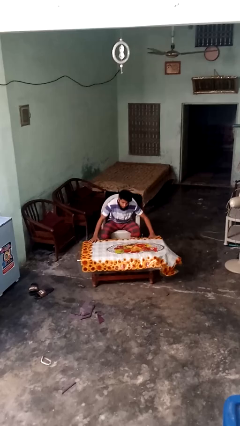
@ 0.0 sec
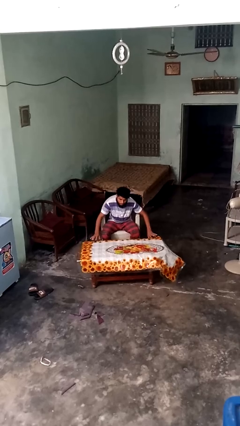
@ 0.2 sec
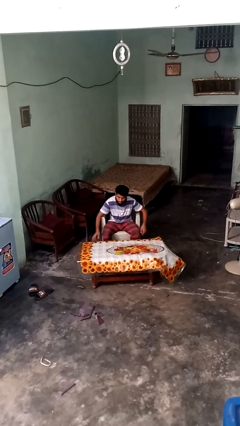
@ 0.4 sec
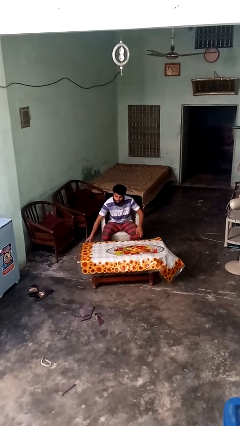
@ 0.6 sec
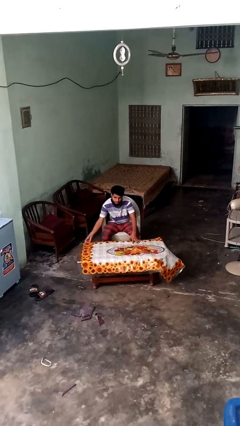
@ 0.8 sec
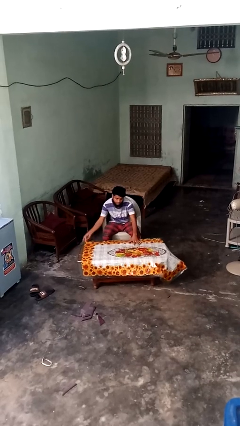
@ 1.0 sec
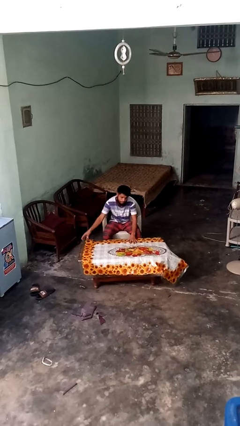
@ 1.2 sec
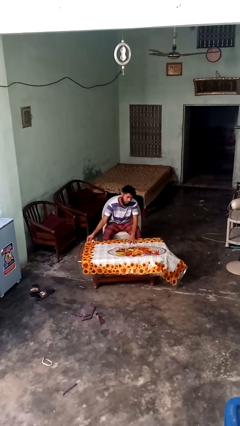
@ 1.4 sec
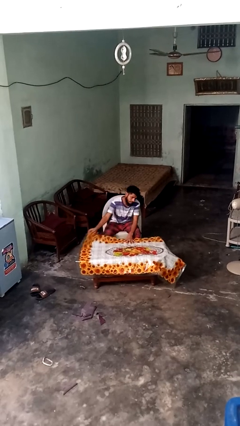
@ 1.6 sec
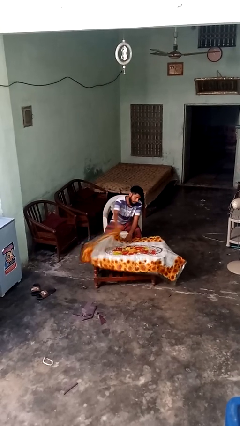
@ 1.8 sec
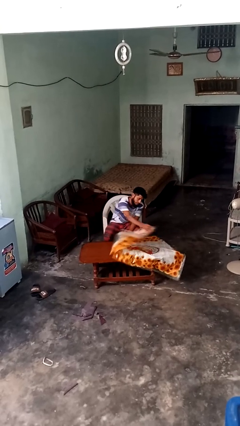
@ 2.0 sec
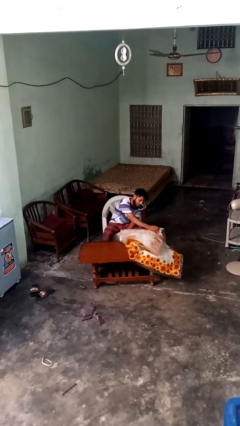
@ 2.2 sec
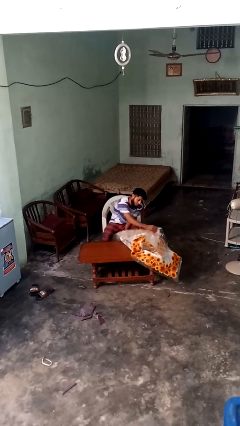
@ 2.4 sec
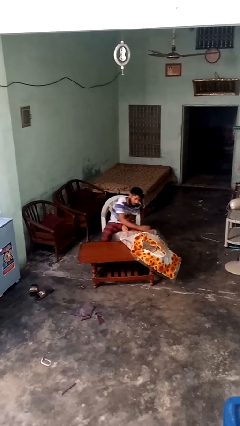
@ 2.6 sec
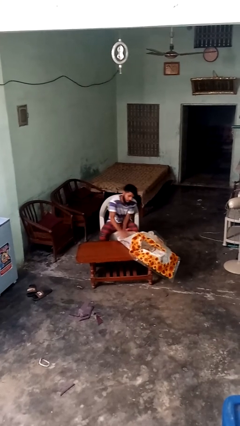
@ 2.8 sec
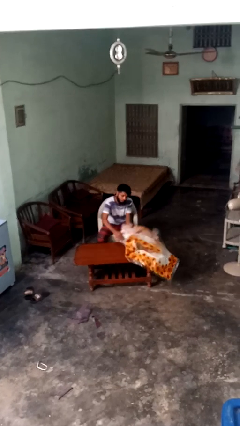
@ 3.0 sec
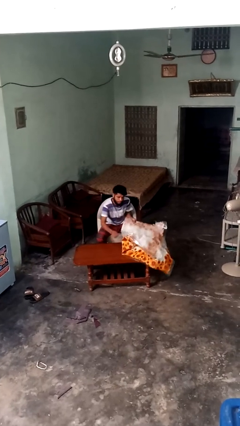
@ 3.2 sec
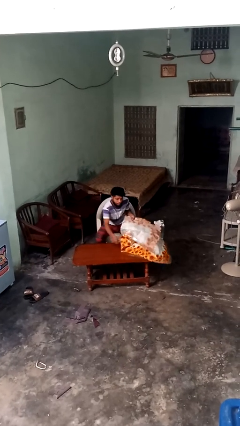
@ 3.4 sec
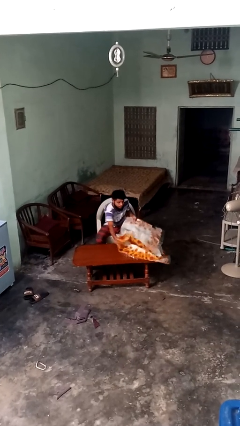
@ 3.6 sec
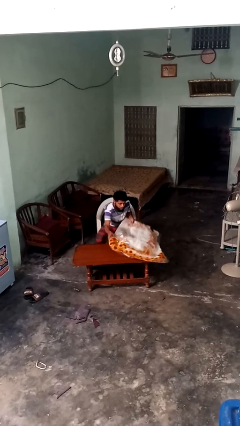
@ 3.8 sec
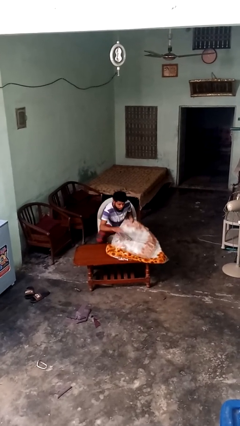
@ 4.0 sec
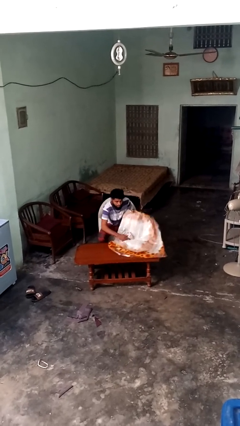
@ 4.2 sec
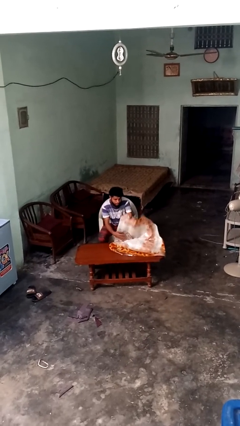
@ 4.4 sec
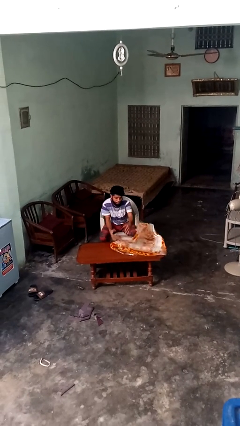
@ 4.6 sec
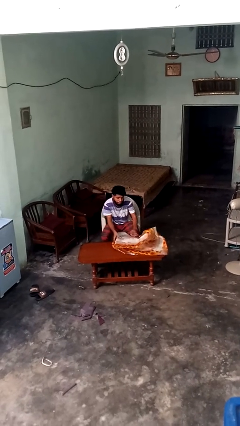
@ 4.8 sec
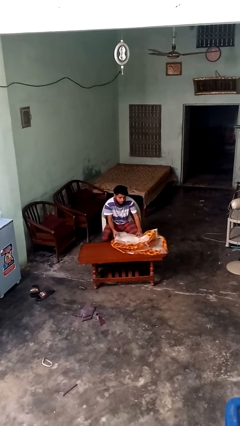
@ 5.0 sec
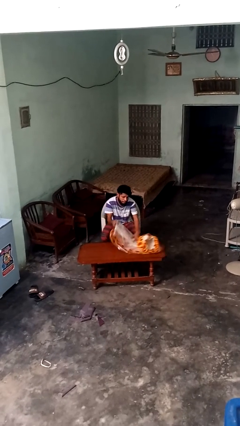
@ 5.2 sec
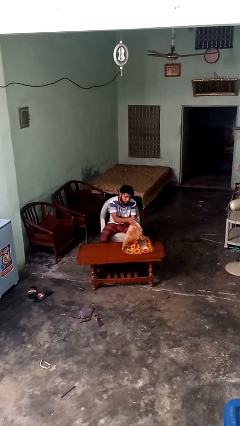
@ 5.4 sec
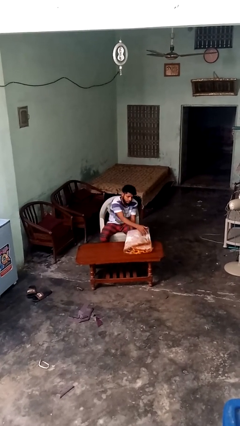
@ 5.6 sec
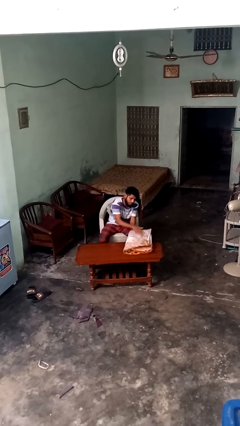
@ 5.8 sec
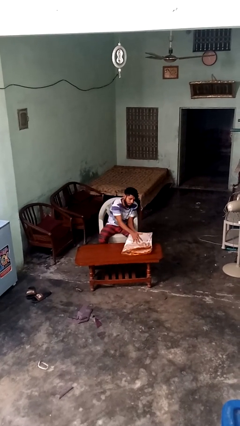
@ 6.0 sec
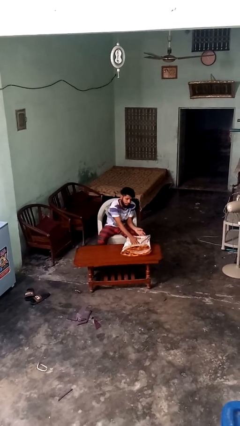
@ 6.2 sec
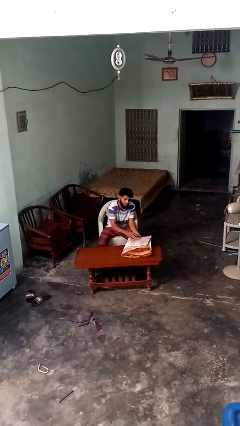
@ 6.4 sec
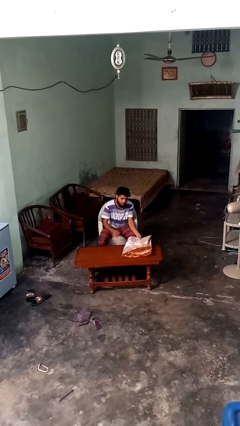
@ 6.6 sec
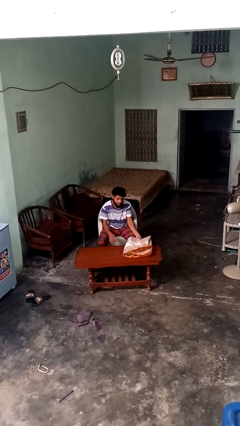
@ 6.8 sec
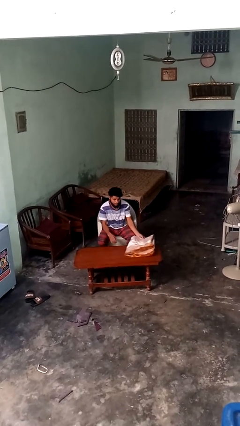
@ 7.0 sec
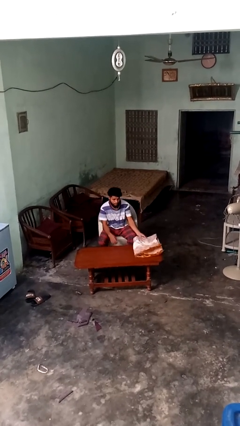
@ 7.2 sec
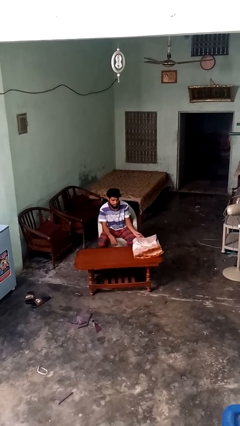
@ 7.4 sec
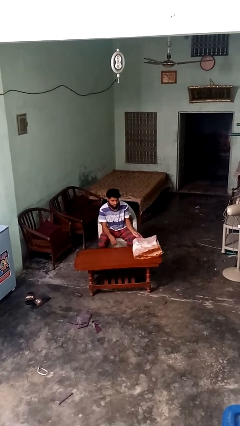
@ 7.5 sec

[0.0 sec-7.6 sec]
person folds tablecloth

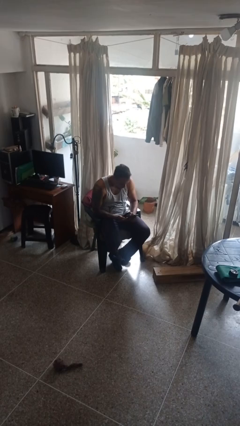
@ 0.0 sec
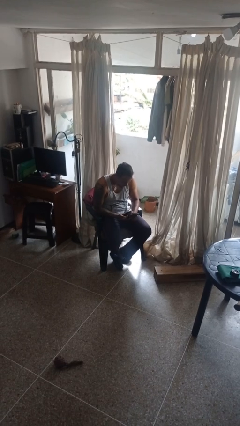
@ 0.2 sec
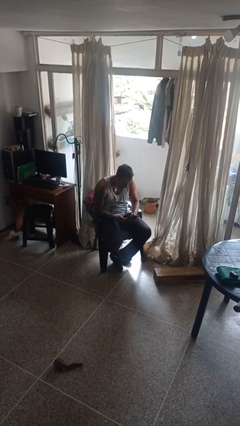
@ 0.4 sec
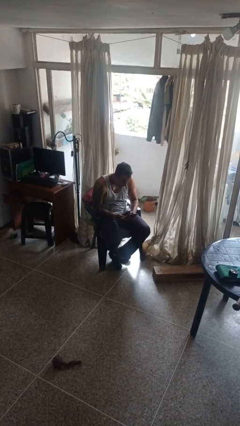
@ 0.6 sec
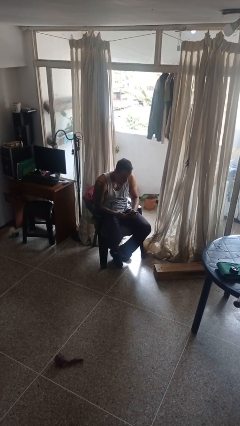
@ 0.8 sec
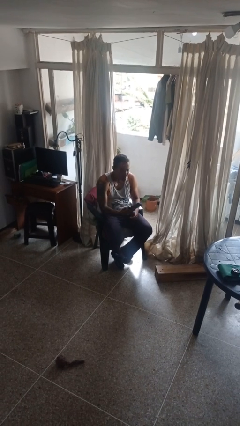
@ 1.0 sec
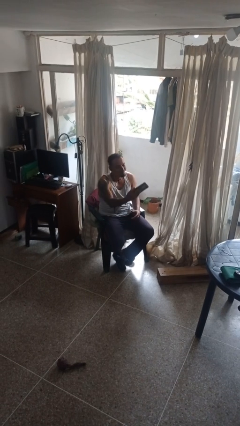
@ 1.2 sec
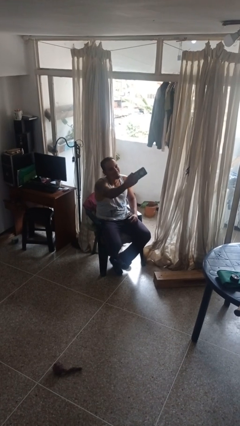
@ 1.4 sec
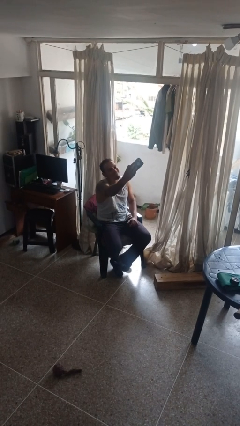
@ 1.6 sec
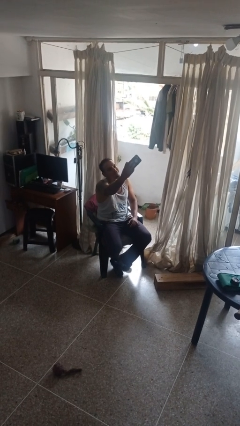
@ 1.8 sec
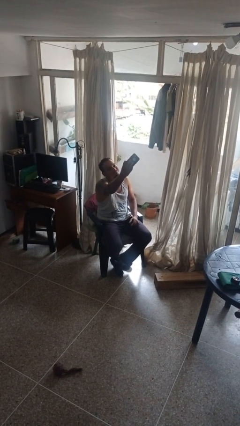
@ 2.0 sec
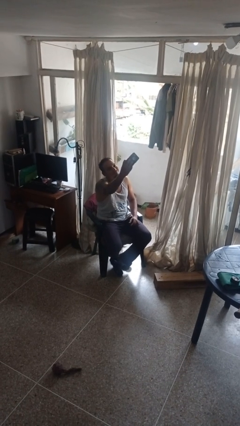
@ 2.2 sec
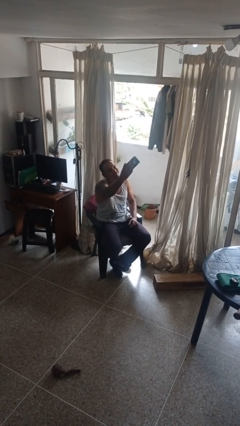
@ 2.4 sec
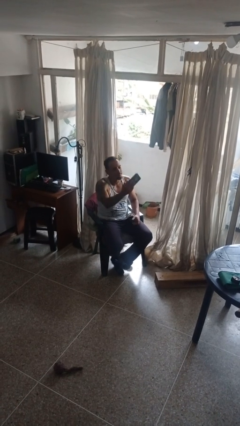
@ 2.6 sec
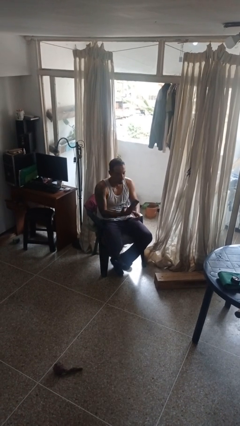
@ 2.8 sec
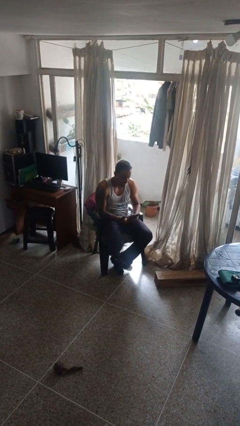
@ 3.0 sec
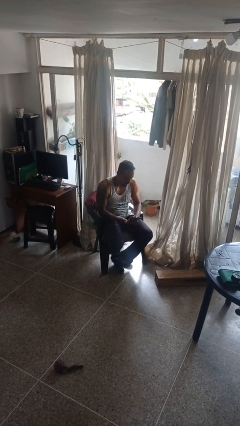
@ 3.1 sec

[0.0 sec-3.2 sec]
person takes selfie

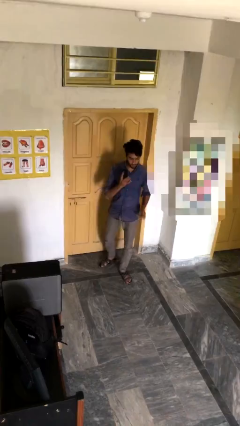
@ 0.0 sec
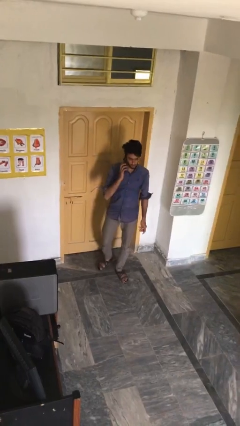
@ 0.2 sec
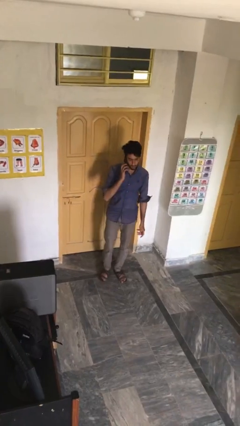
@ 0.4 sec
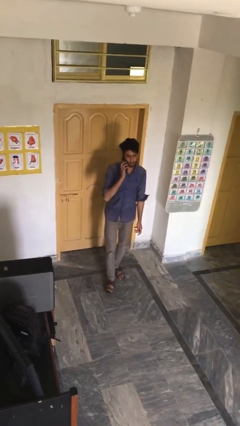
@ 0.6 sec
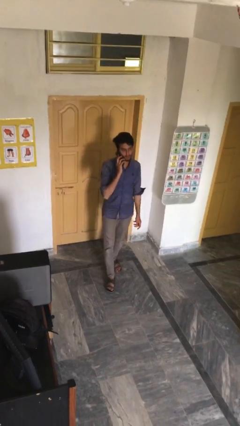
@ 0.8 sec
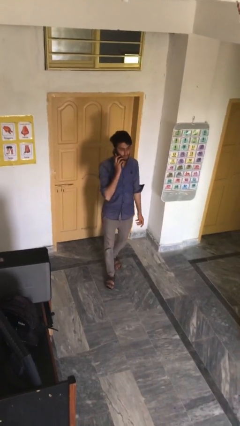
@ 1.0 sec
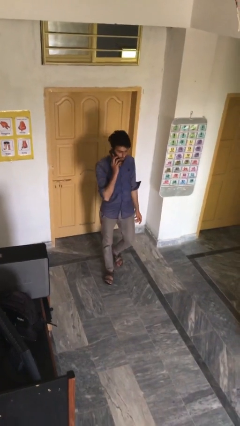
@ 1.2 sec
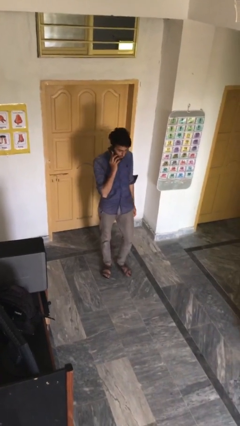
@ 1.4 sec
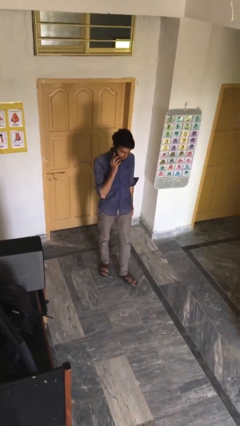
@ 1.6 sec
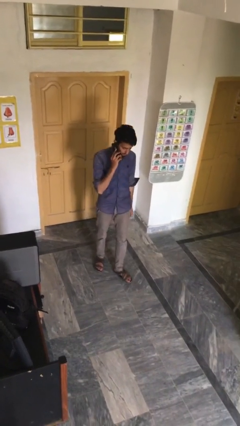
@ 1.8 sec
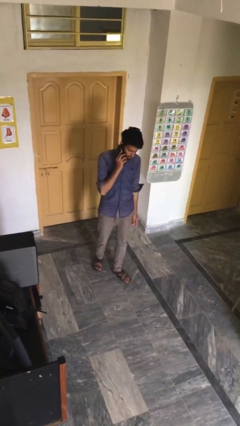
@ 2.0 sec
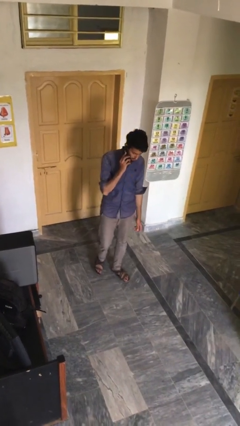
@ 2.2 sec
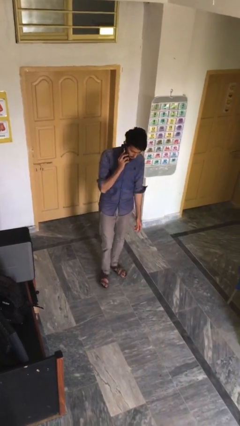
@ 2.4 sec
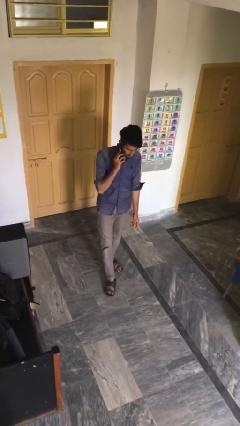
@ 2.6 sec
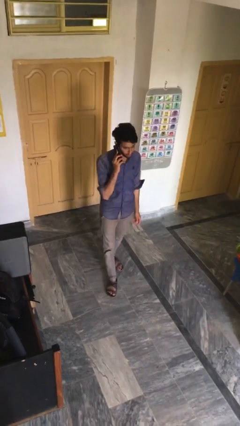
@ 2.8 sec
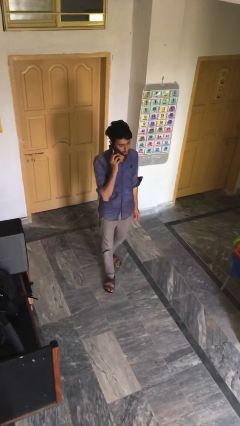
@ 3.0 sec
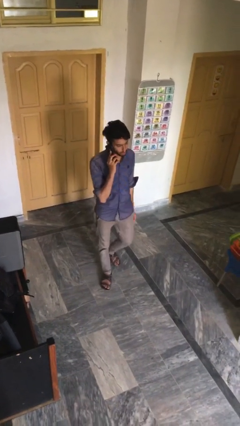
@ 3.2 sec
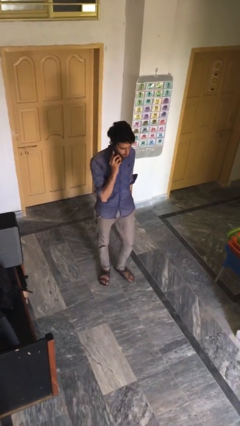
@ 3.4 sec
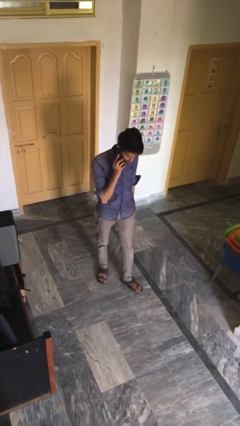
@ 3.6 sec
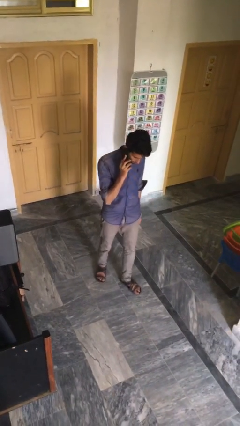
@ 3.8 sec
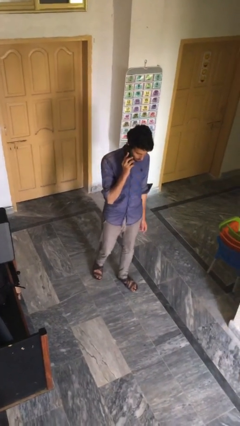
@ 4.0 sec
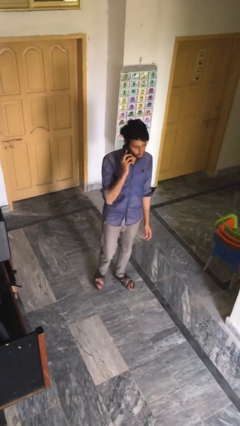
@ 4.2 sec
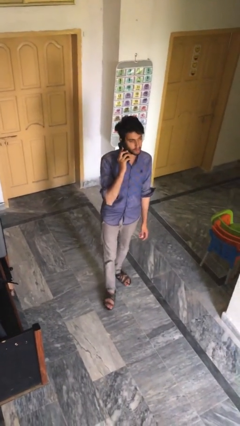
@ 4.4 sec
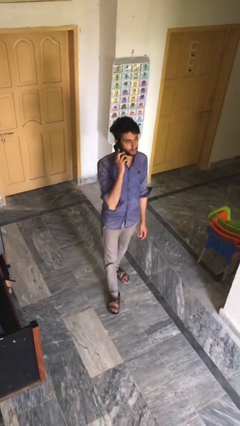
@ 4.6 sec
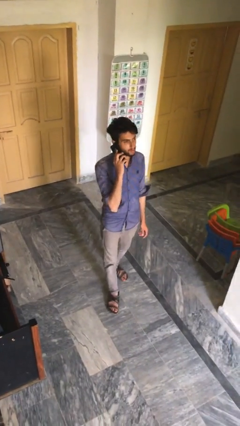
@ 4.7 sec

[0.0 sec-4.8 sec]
person talks on phone

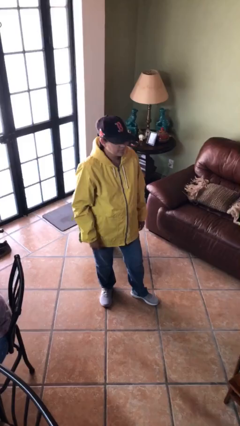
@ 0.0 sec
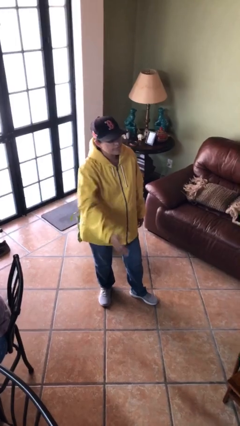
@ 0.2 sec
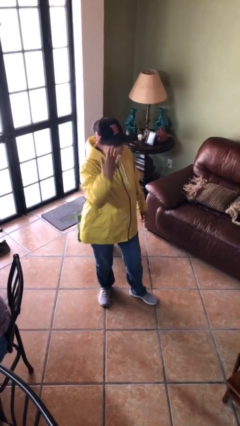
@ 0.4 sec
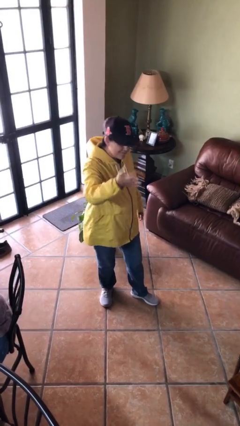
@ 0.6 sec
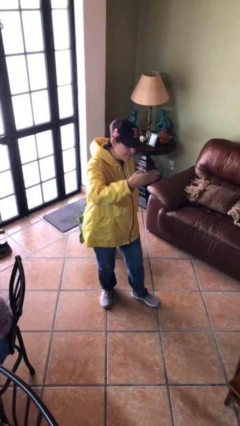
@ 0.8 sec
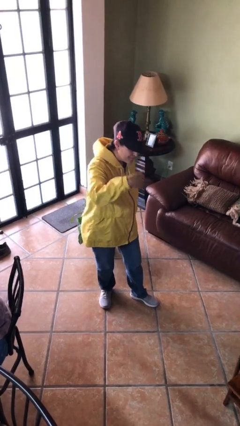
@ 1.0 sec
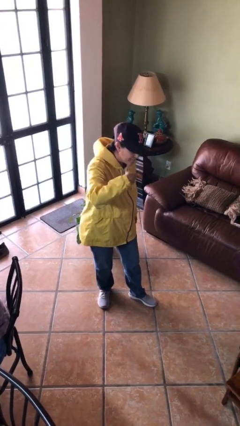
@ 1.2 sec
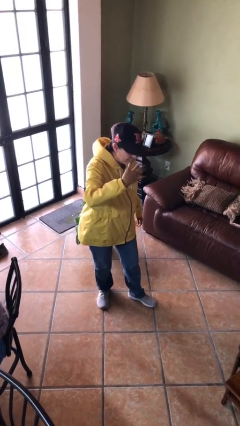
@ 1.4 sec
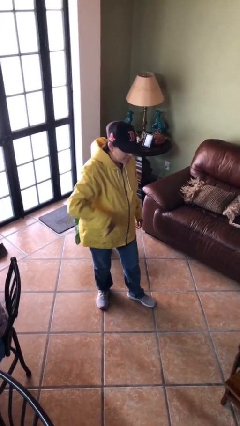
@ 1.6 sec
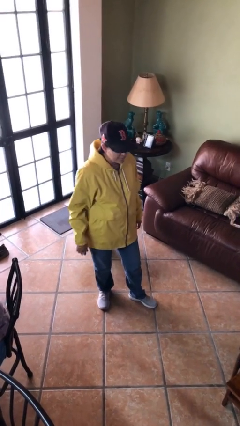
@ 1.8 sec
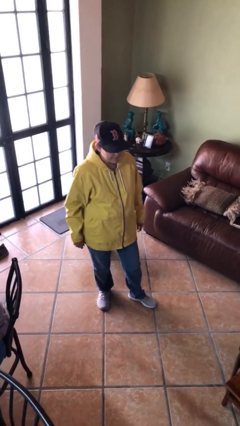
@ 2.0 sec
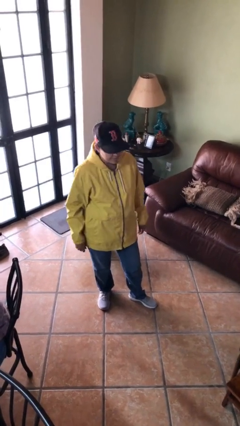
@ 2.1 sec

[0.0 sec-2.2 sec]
person gestures come here
